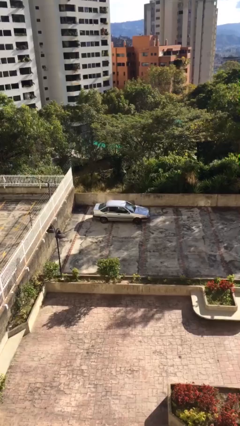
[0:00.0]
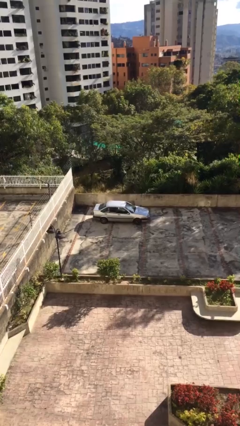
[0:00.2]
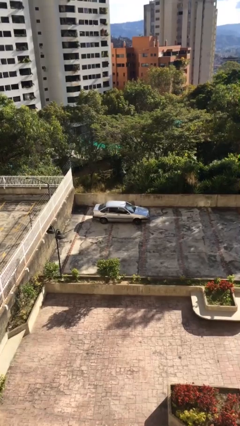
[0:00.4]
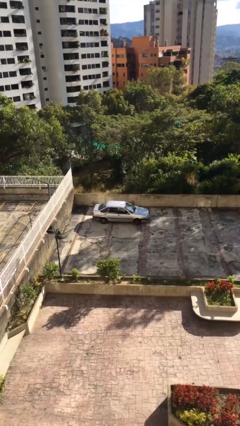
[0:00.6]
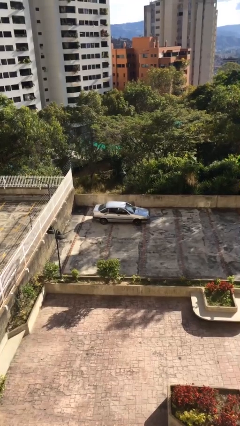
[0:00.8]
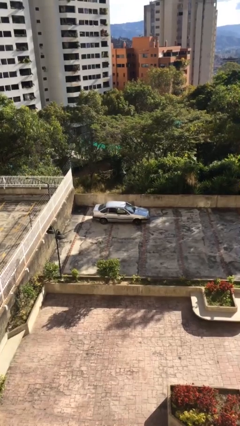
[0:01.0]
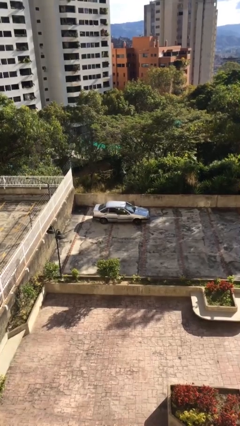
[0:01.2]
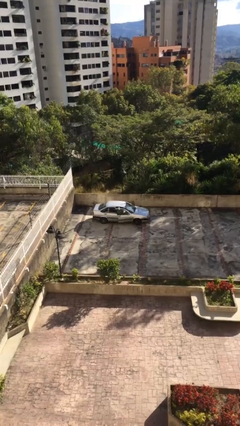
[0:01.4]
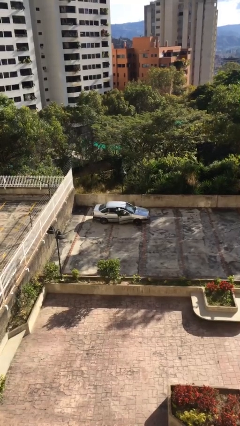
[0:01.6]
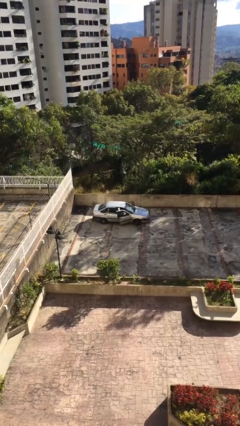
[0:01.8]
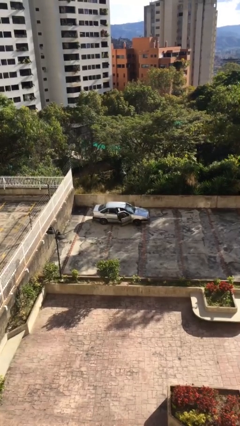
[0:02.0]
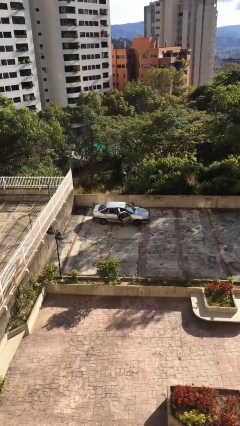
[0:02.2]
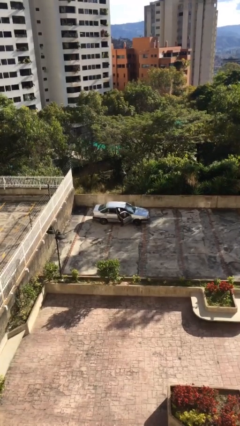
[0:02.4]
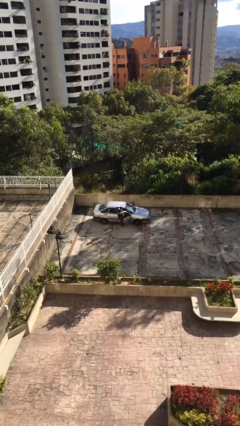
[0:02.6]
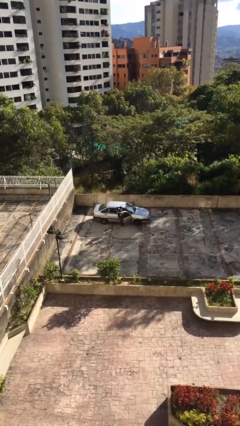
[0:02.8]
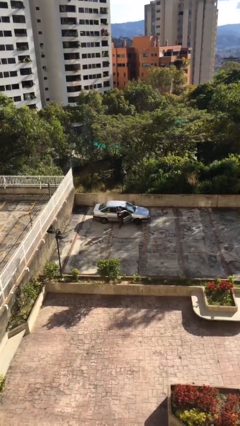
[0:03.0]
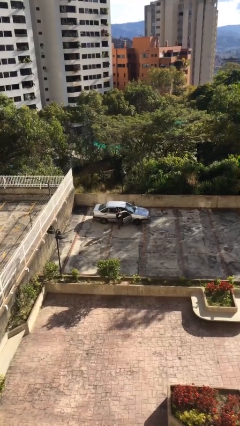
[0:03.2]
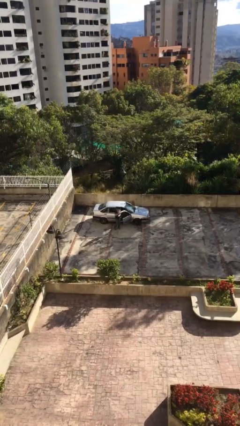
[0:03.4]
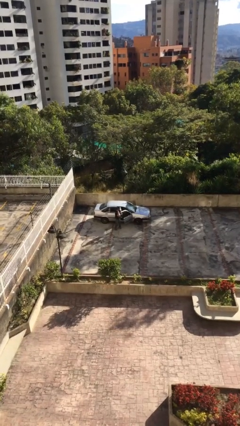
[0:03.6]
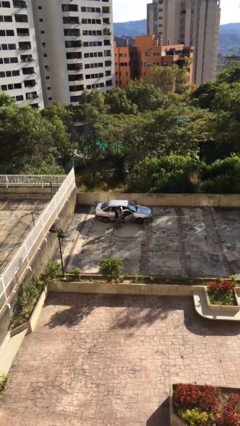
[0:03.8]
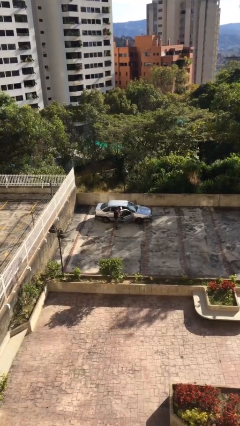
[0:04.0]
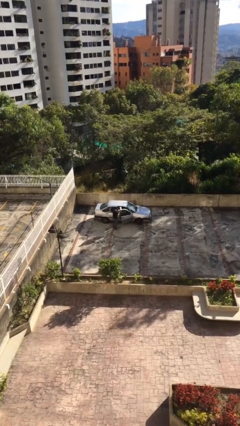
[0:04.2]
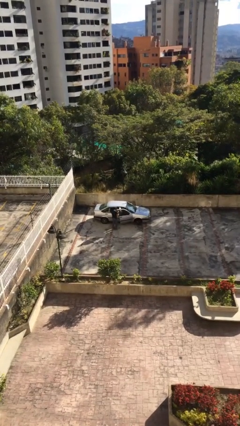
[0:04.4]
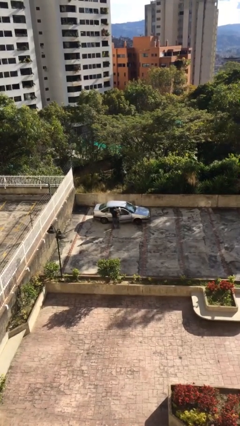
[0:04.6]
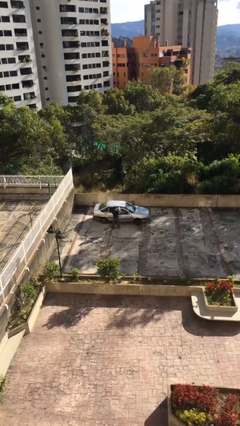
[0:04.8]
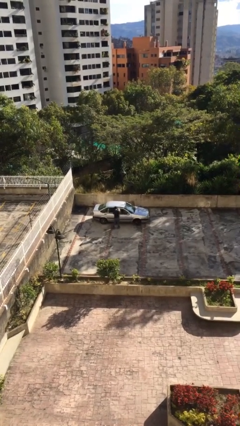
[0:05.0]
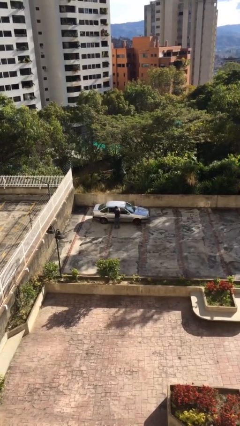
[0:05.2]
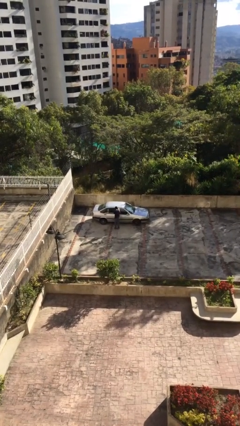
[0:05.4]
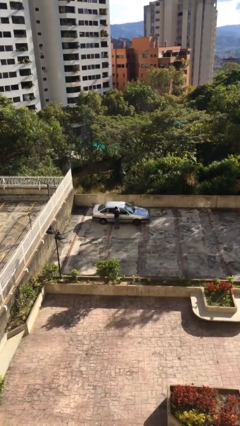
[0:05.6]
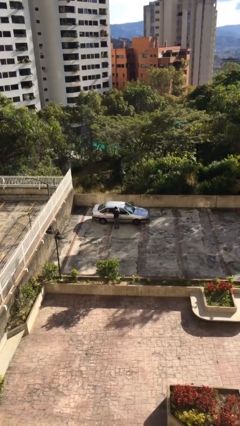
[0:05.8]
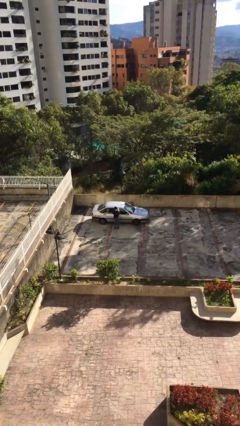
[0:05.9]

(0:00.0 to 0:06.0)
car drops off person

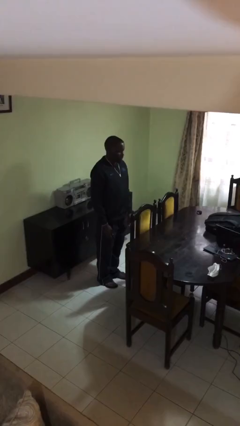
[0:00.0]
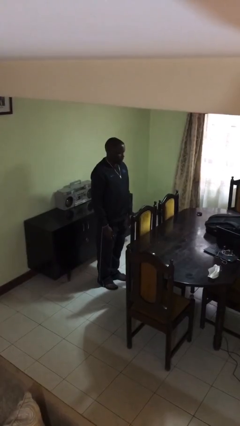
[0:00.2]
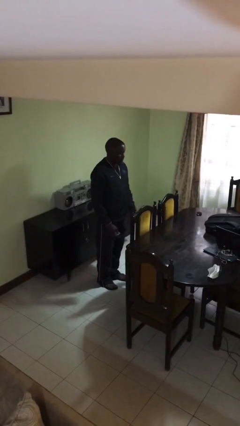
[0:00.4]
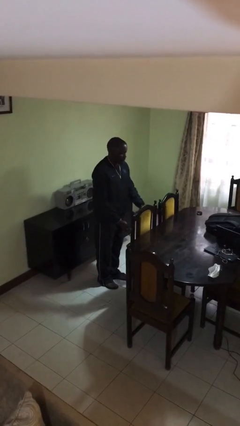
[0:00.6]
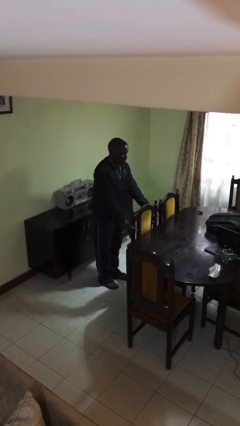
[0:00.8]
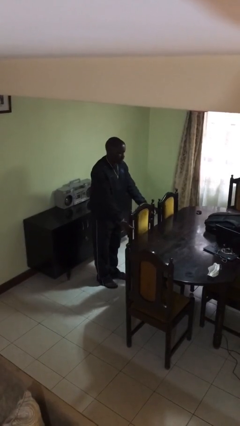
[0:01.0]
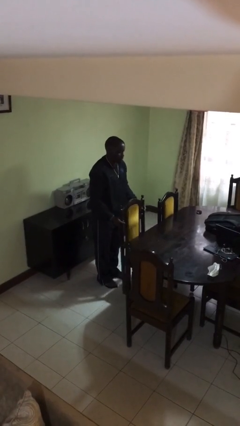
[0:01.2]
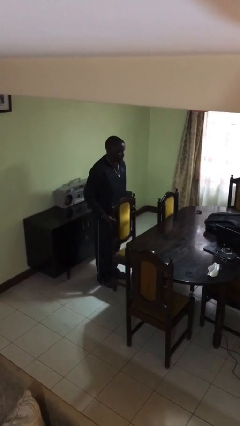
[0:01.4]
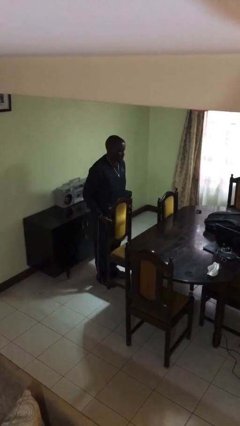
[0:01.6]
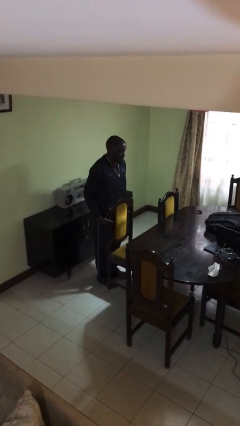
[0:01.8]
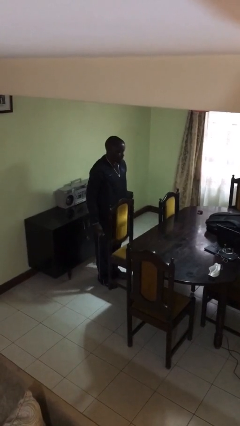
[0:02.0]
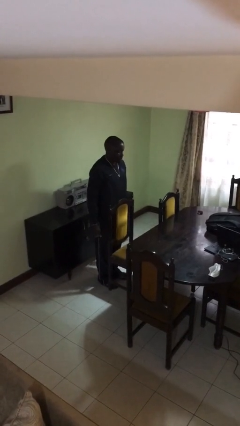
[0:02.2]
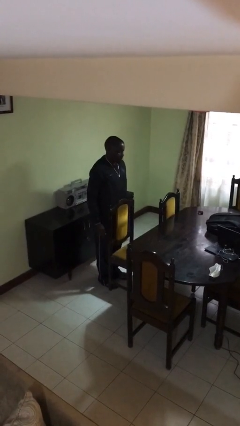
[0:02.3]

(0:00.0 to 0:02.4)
person pulls out chair

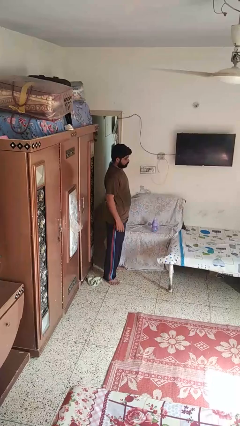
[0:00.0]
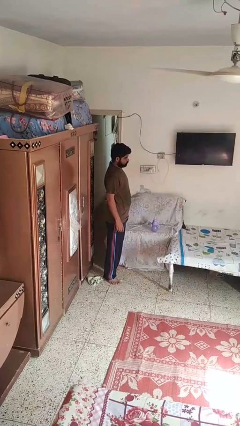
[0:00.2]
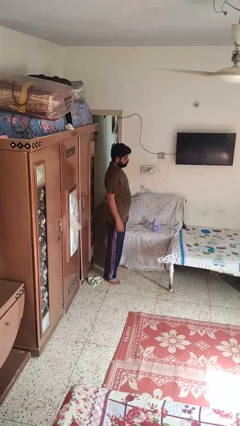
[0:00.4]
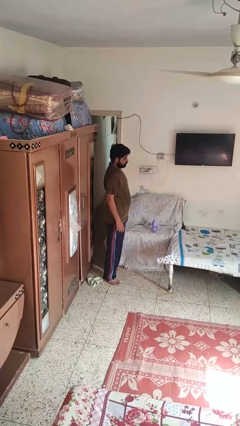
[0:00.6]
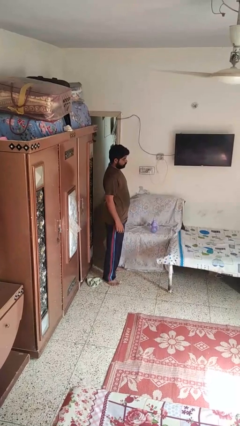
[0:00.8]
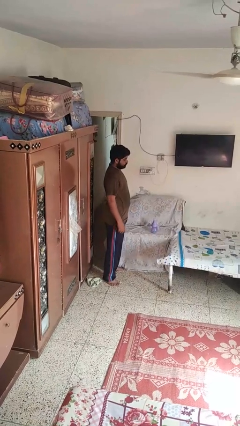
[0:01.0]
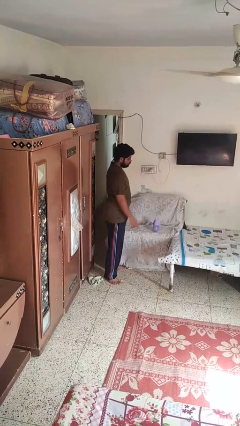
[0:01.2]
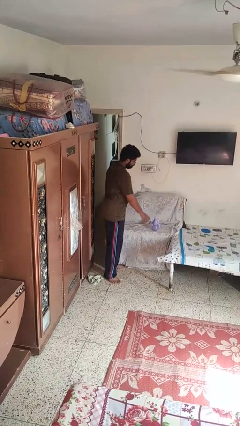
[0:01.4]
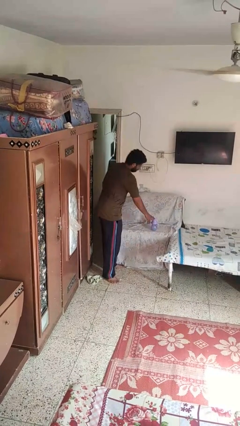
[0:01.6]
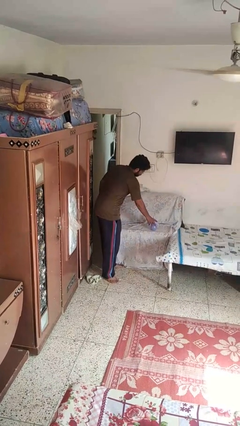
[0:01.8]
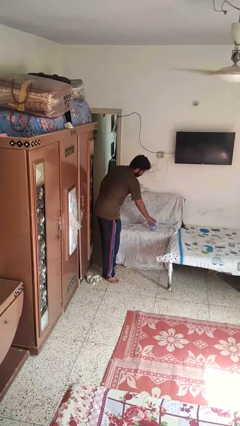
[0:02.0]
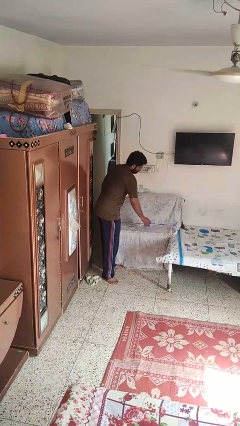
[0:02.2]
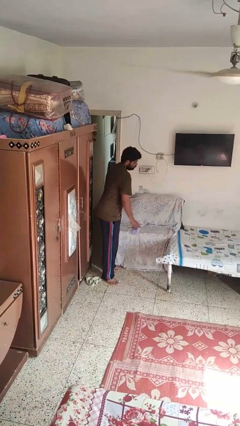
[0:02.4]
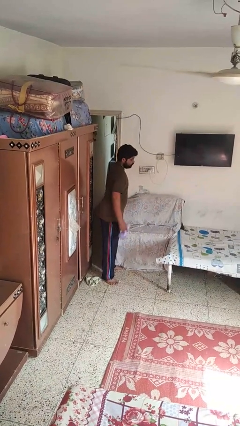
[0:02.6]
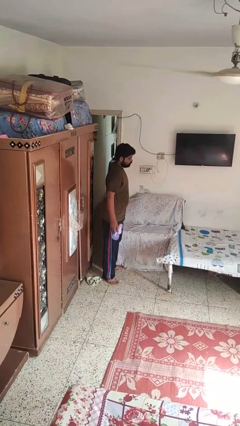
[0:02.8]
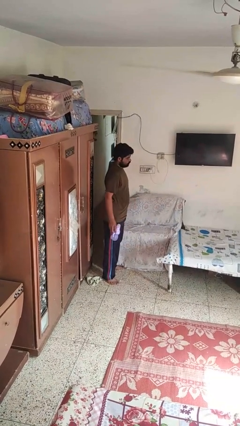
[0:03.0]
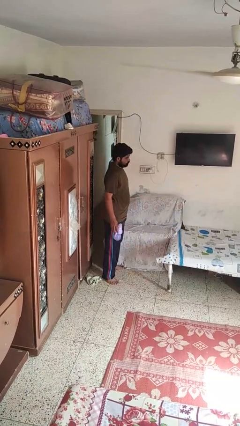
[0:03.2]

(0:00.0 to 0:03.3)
person picks up object from couch

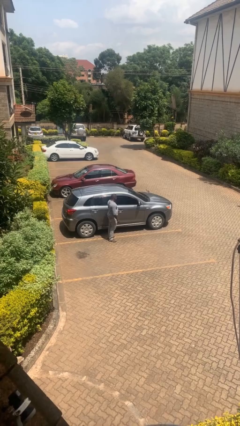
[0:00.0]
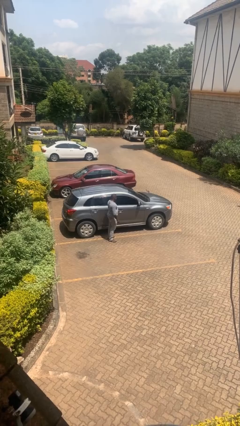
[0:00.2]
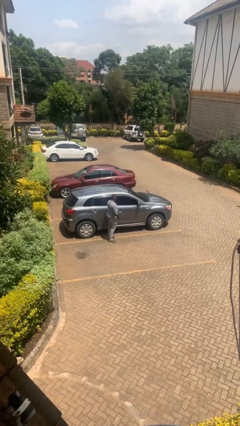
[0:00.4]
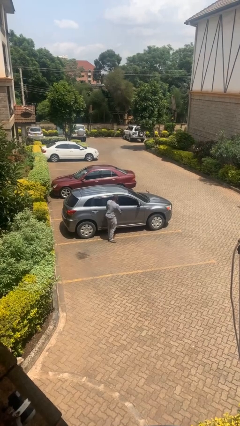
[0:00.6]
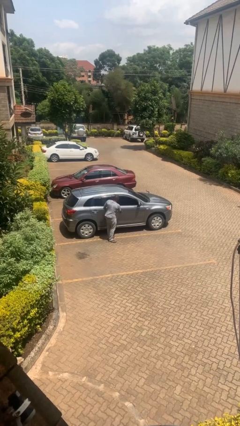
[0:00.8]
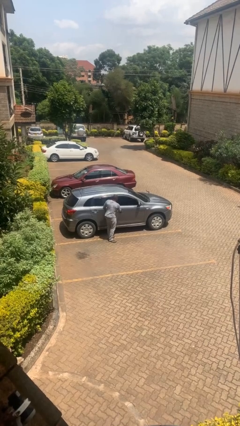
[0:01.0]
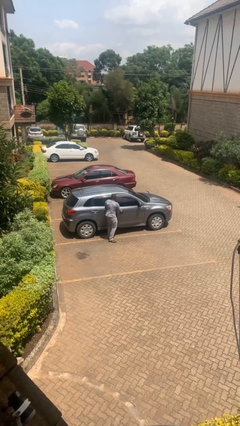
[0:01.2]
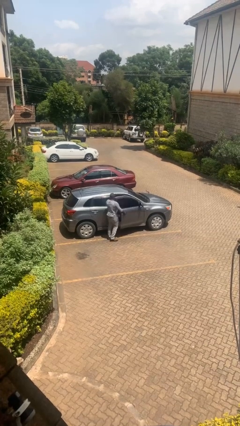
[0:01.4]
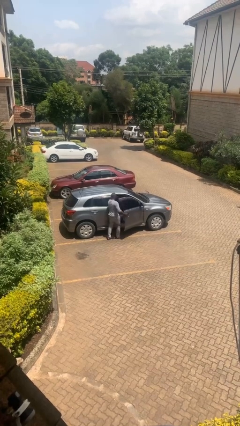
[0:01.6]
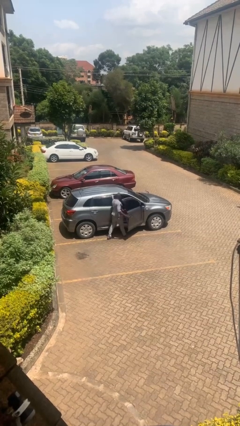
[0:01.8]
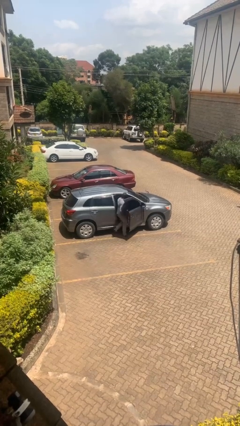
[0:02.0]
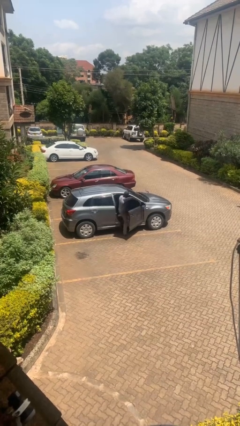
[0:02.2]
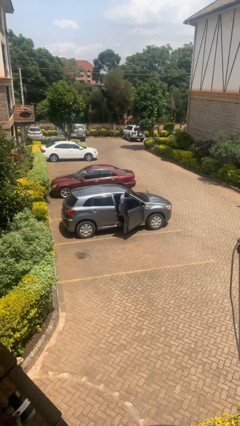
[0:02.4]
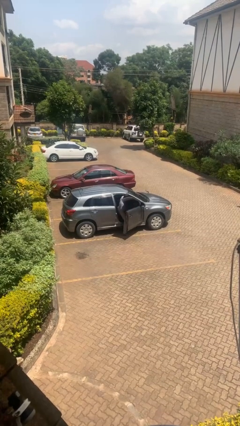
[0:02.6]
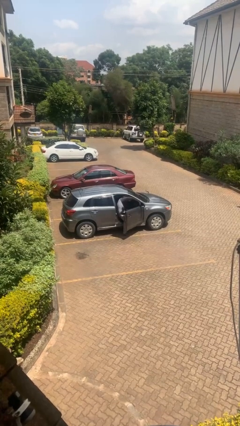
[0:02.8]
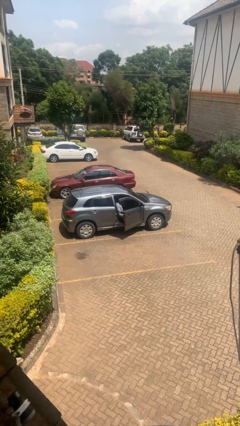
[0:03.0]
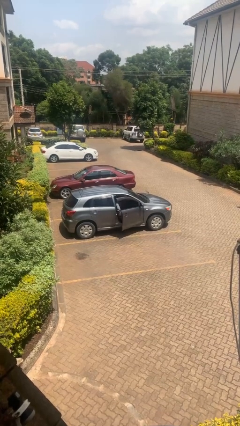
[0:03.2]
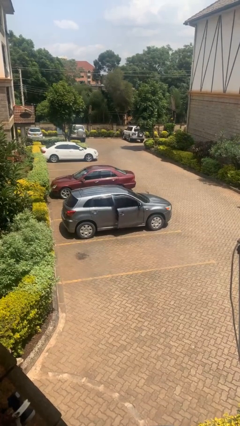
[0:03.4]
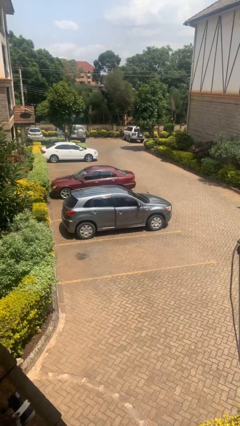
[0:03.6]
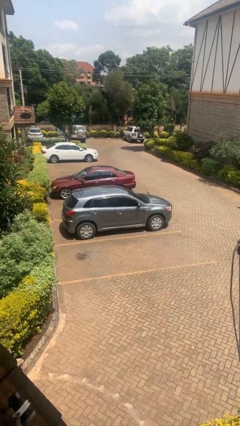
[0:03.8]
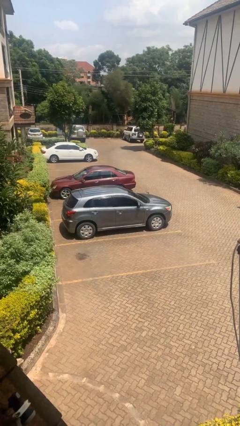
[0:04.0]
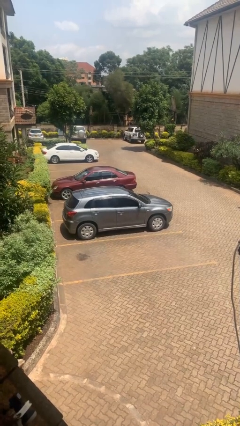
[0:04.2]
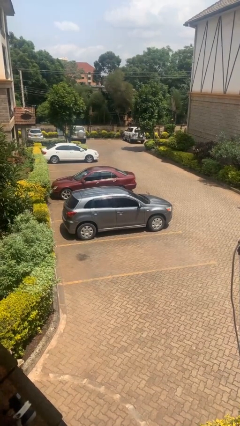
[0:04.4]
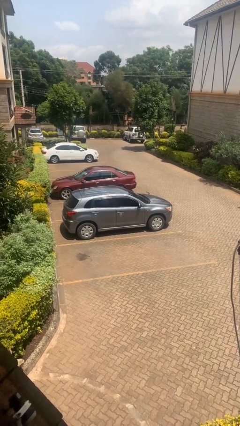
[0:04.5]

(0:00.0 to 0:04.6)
car picks up person

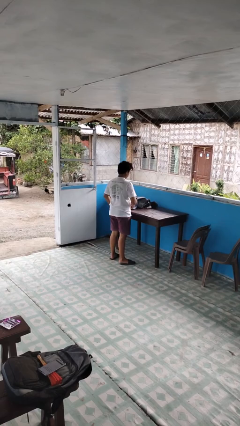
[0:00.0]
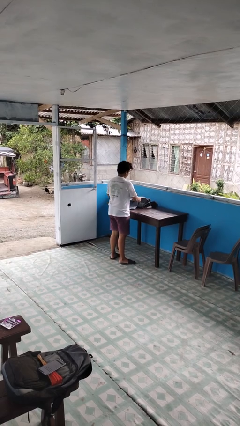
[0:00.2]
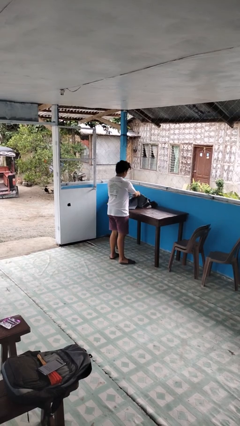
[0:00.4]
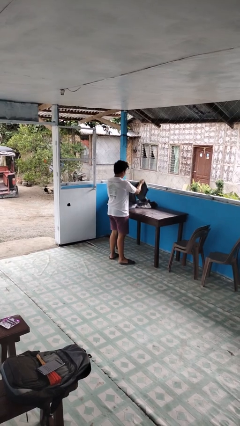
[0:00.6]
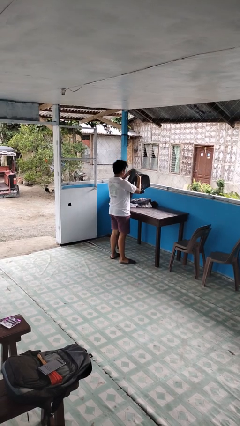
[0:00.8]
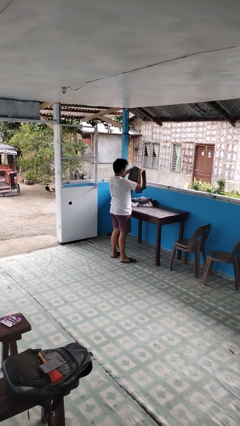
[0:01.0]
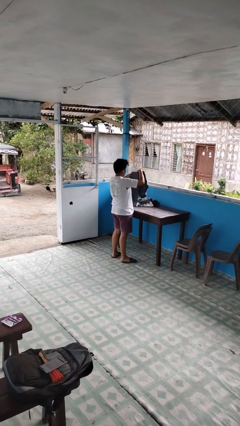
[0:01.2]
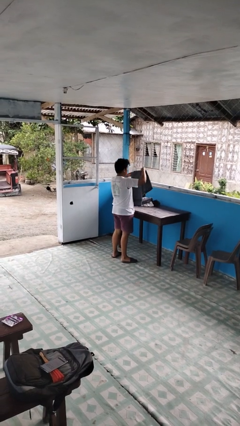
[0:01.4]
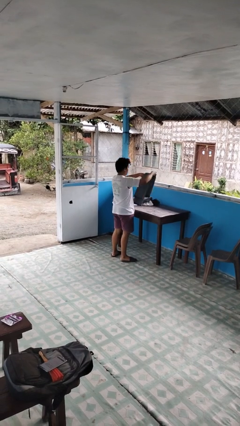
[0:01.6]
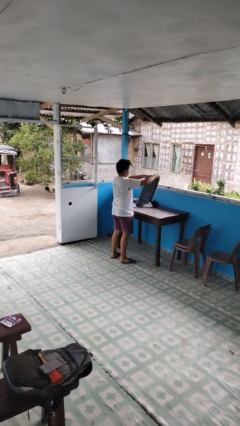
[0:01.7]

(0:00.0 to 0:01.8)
person folds pants
